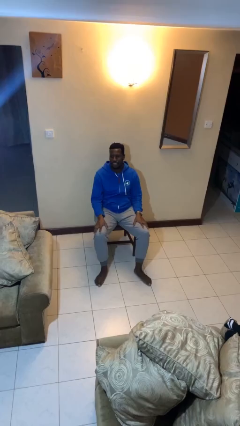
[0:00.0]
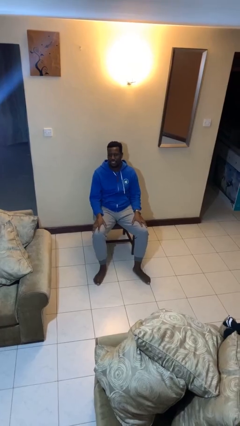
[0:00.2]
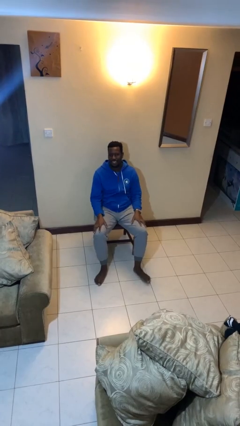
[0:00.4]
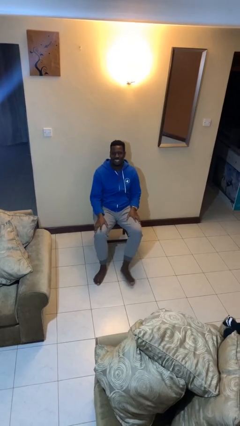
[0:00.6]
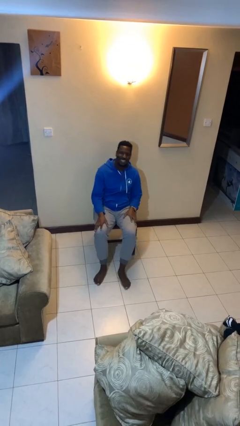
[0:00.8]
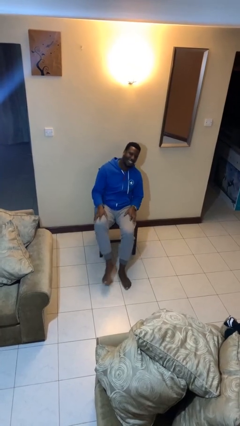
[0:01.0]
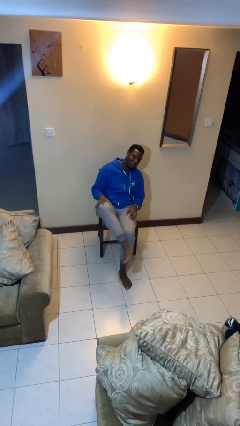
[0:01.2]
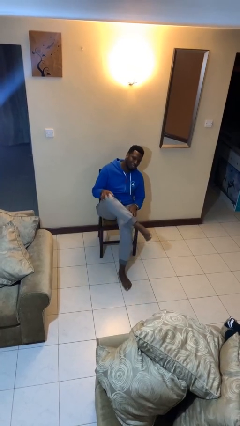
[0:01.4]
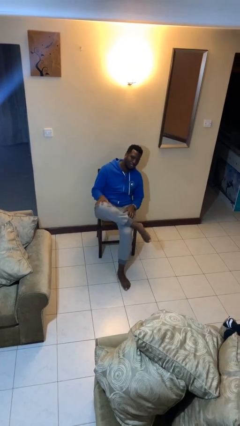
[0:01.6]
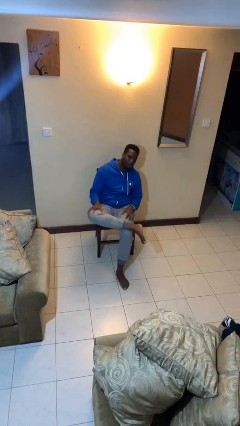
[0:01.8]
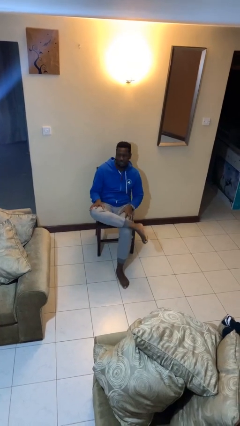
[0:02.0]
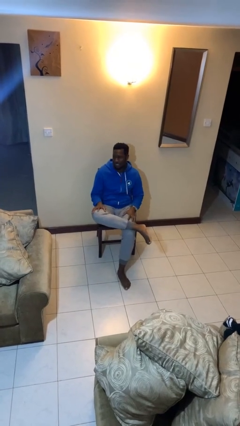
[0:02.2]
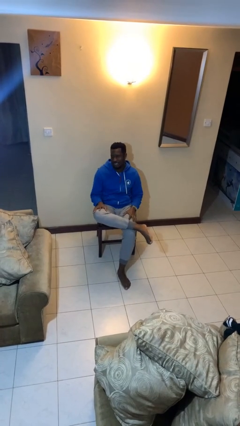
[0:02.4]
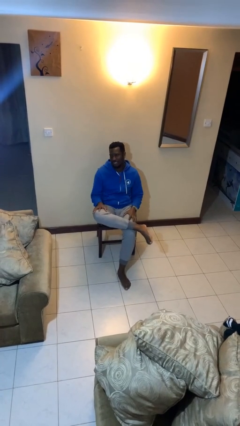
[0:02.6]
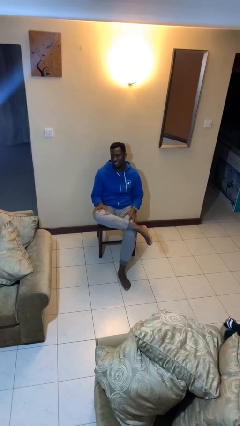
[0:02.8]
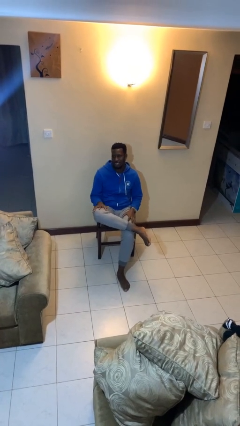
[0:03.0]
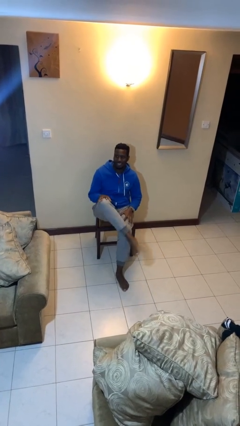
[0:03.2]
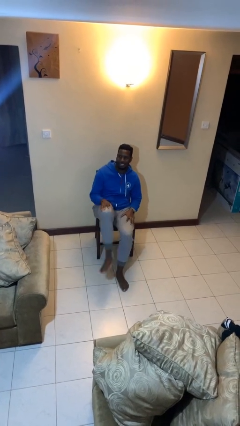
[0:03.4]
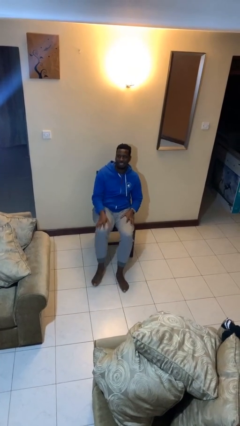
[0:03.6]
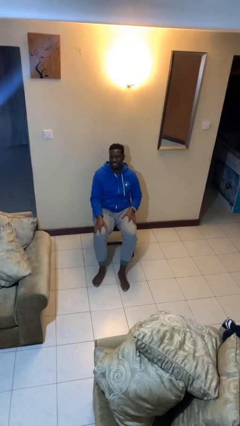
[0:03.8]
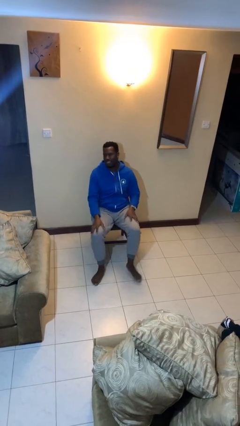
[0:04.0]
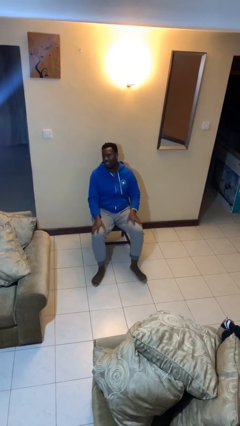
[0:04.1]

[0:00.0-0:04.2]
person crosses legs

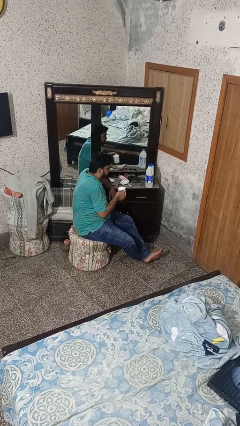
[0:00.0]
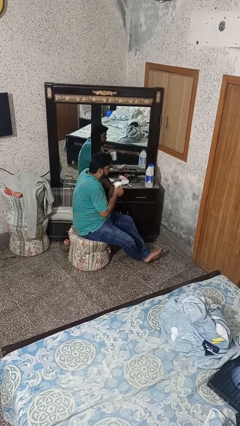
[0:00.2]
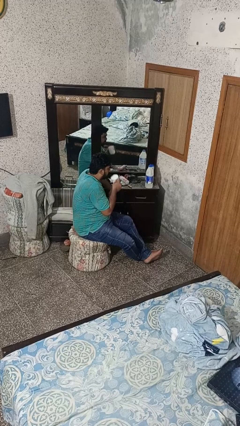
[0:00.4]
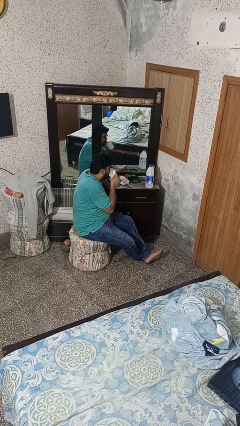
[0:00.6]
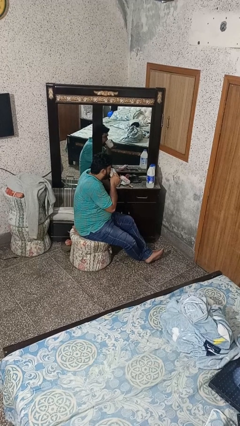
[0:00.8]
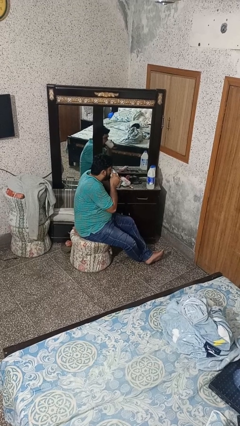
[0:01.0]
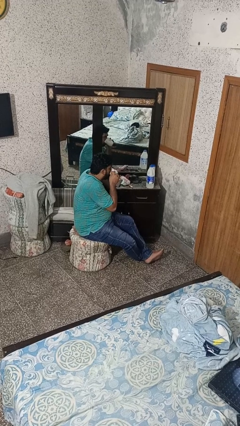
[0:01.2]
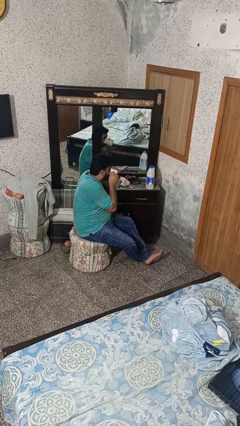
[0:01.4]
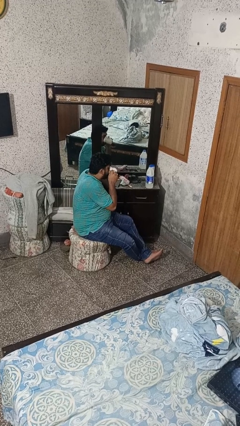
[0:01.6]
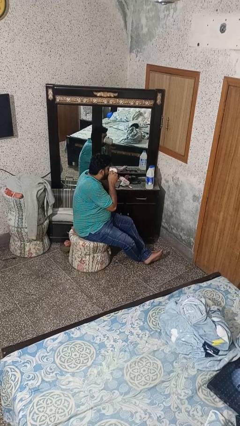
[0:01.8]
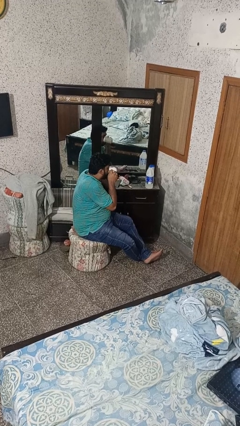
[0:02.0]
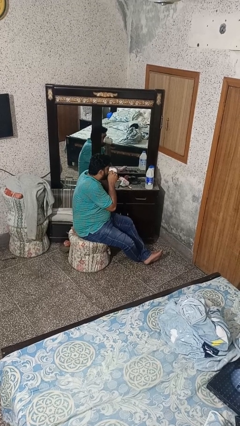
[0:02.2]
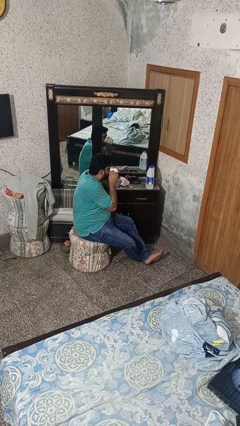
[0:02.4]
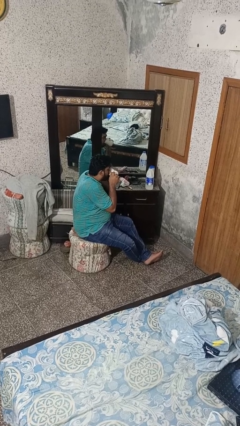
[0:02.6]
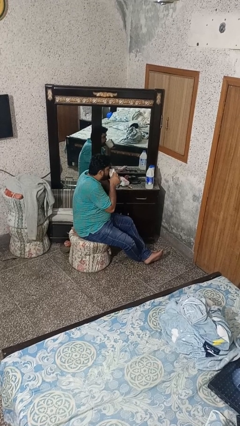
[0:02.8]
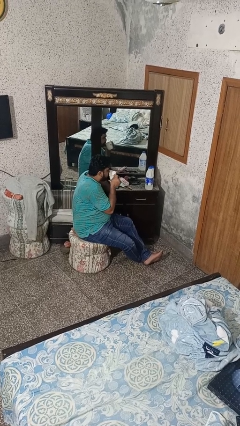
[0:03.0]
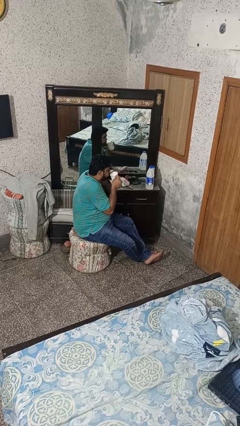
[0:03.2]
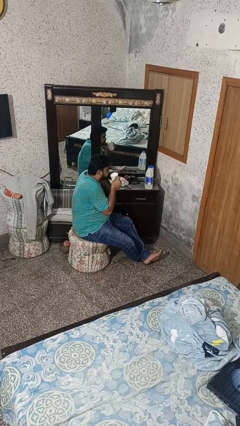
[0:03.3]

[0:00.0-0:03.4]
person drinks from mug

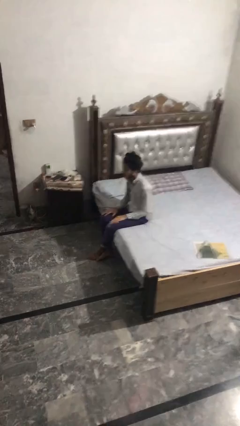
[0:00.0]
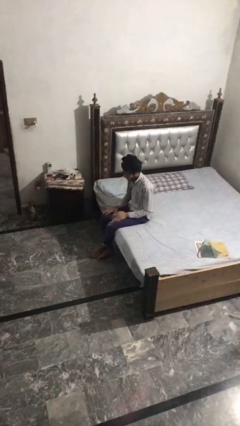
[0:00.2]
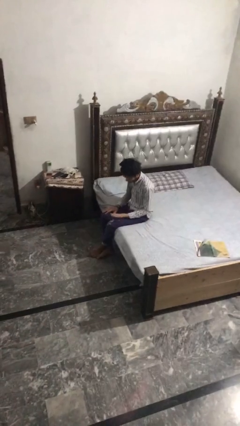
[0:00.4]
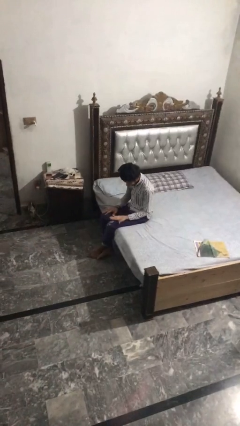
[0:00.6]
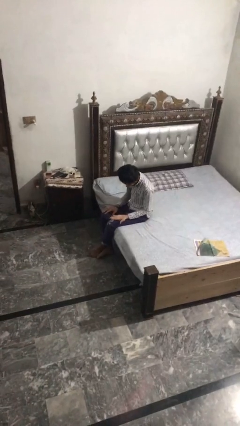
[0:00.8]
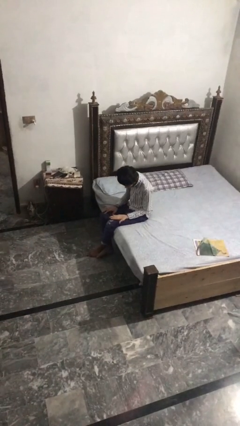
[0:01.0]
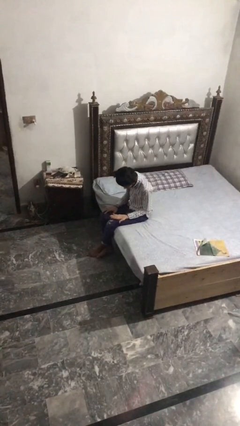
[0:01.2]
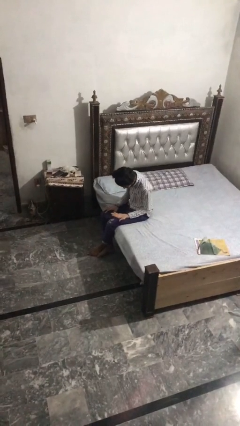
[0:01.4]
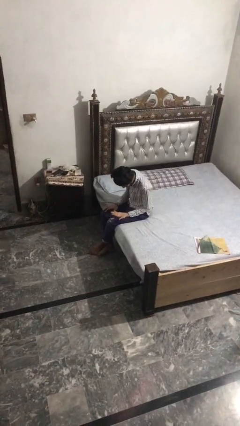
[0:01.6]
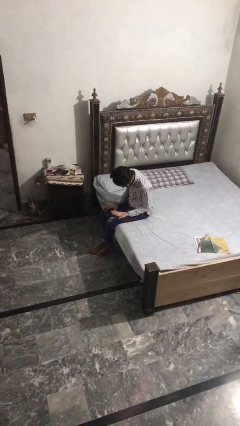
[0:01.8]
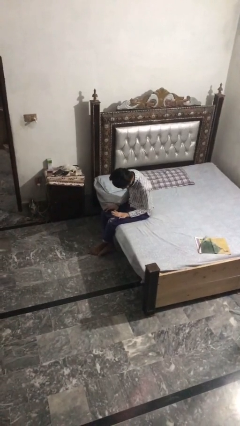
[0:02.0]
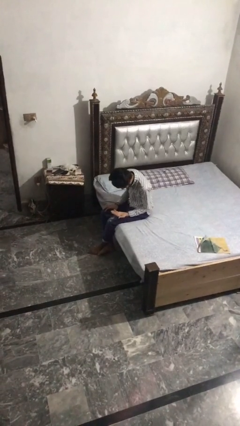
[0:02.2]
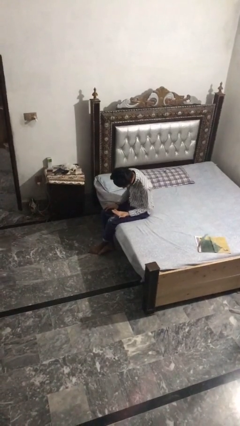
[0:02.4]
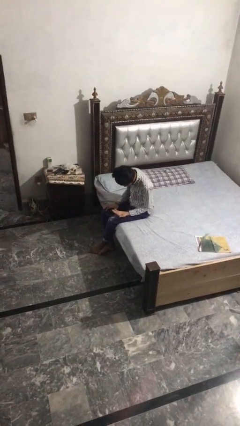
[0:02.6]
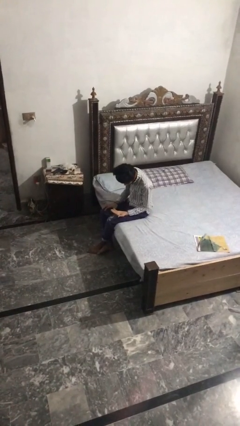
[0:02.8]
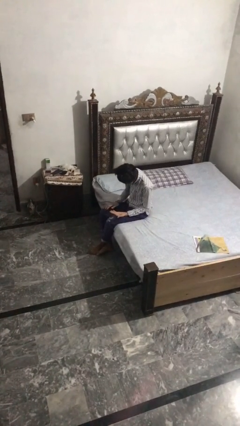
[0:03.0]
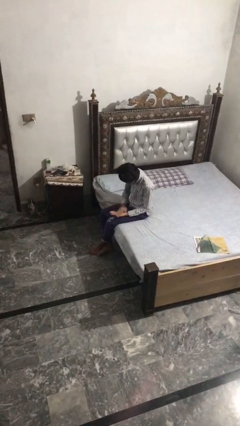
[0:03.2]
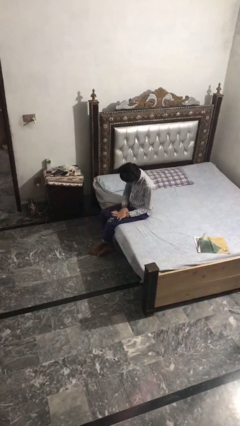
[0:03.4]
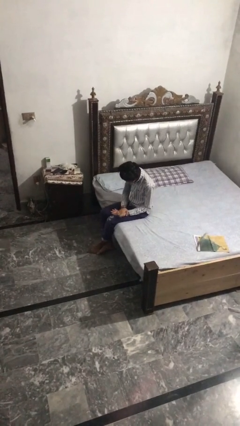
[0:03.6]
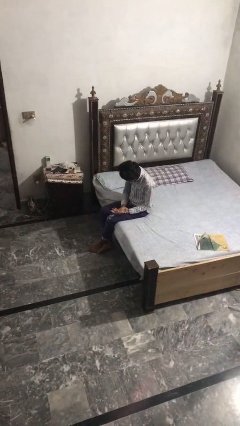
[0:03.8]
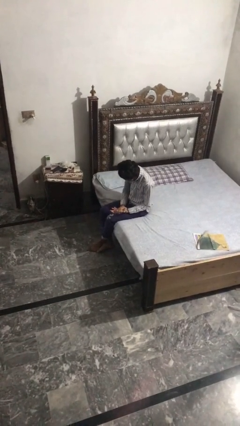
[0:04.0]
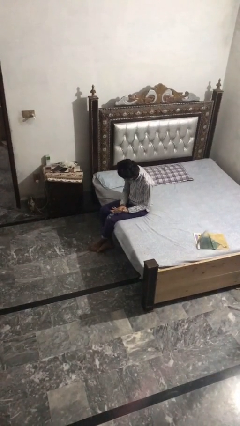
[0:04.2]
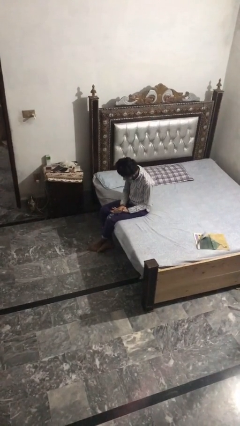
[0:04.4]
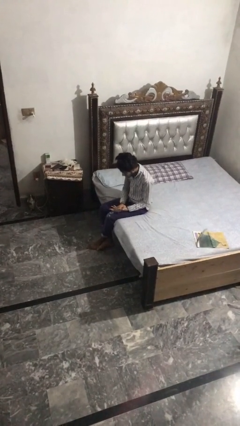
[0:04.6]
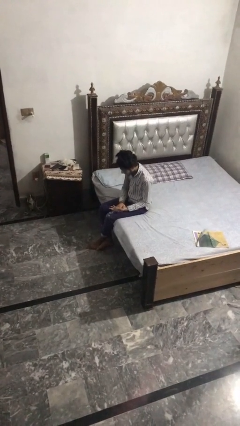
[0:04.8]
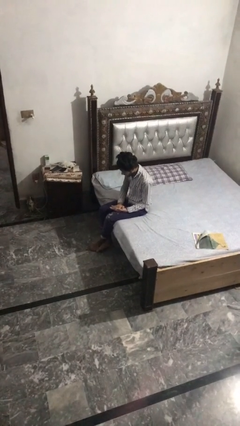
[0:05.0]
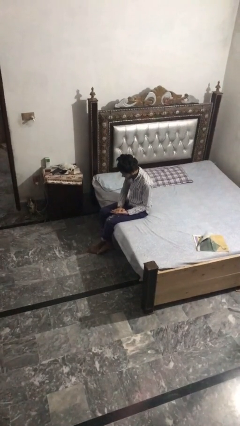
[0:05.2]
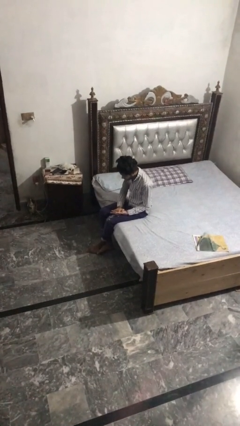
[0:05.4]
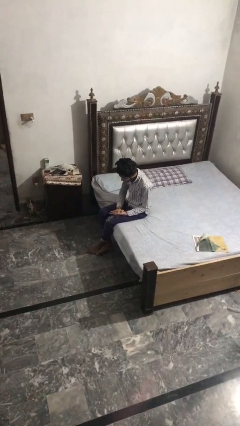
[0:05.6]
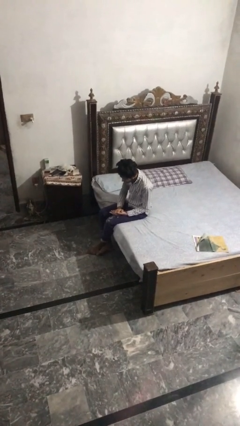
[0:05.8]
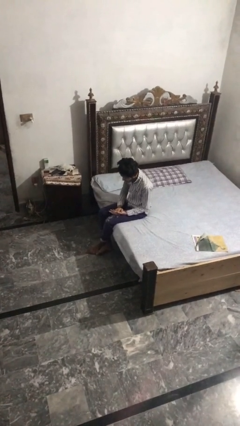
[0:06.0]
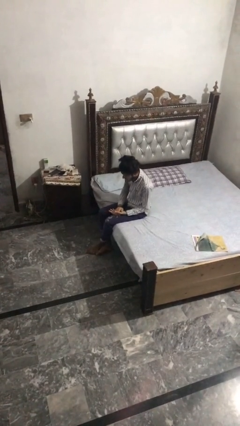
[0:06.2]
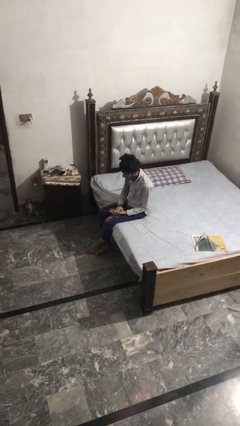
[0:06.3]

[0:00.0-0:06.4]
person looks at hands in lap

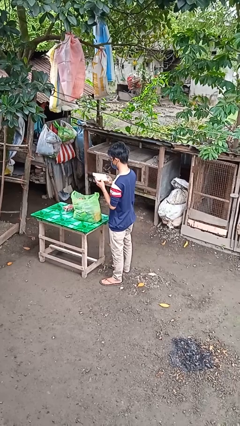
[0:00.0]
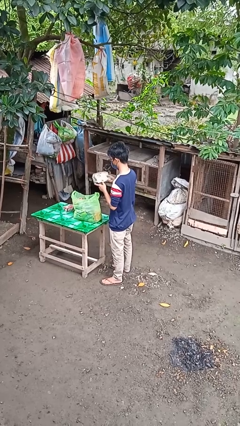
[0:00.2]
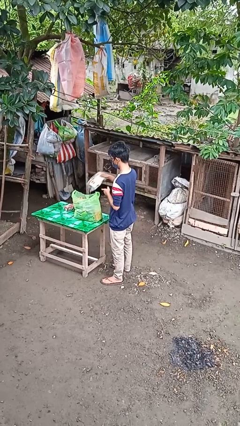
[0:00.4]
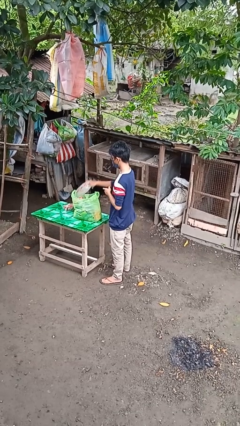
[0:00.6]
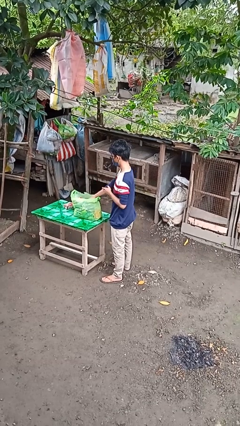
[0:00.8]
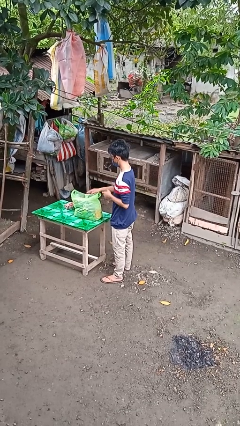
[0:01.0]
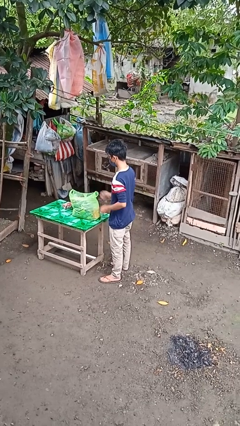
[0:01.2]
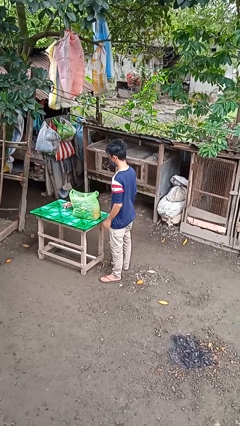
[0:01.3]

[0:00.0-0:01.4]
person puts object into bag

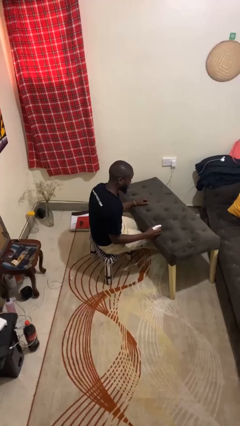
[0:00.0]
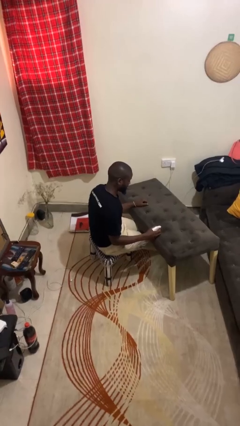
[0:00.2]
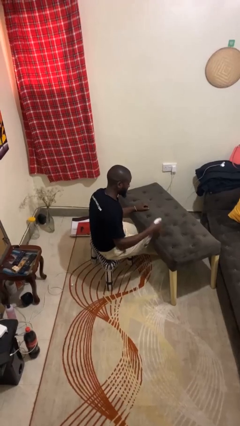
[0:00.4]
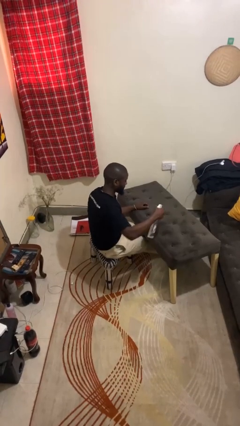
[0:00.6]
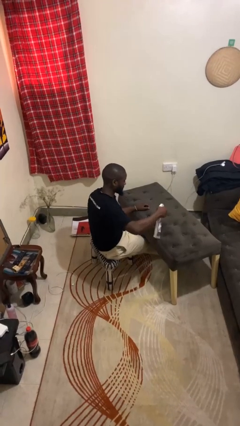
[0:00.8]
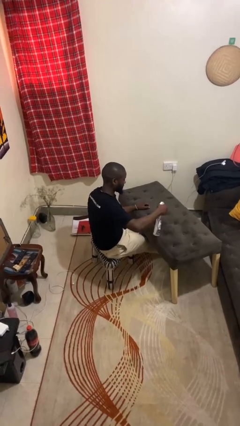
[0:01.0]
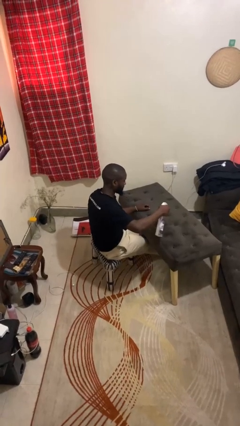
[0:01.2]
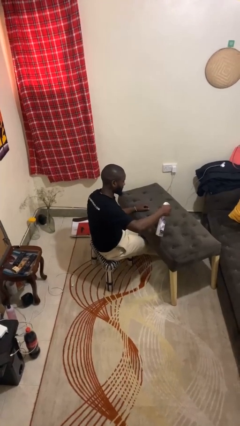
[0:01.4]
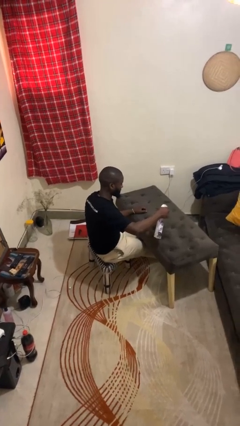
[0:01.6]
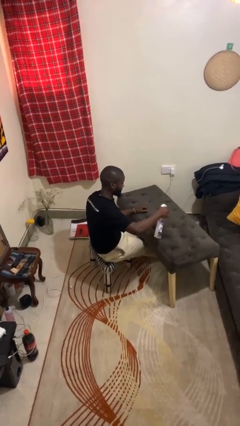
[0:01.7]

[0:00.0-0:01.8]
person sprays from bottle

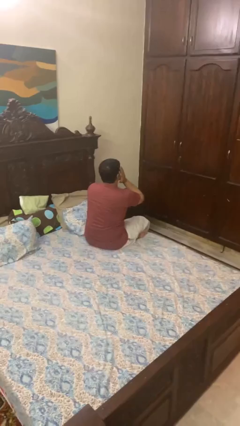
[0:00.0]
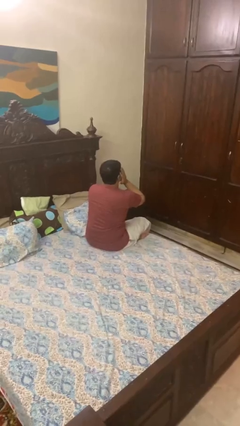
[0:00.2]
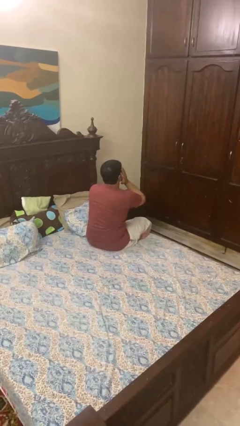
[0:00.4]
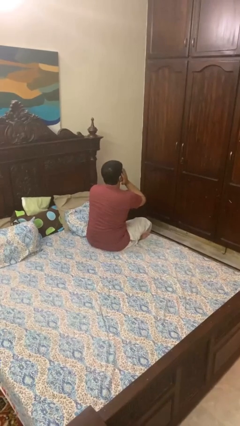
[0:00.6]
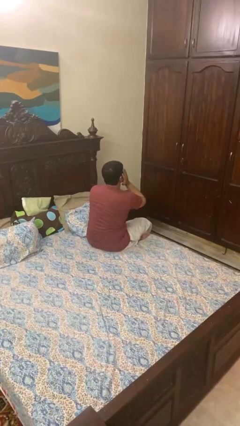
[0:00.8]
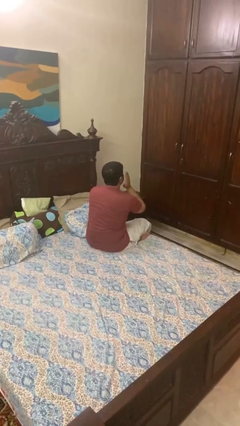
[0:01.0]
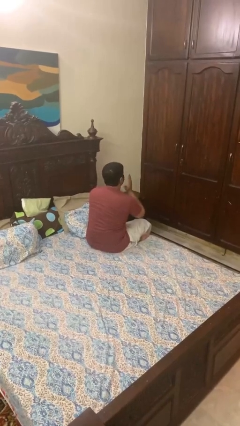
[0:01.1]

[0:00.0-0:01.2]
person covers face with hands
